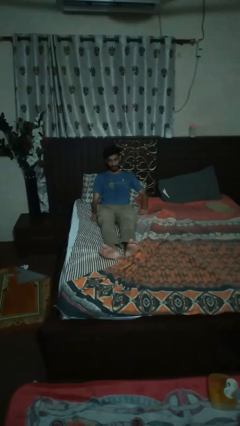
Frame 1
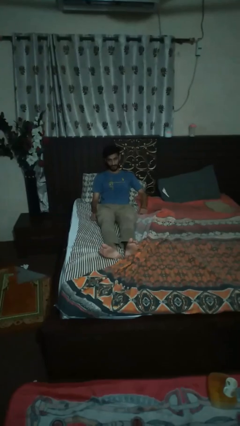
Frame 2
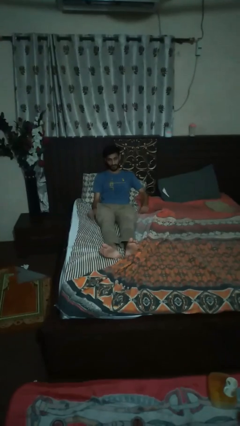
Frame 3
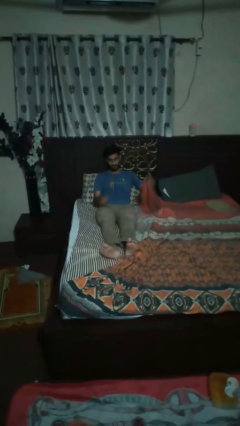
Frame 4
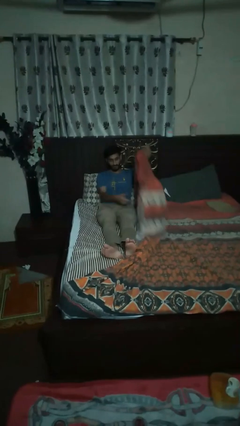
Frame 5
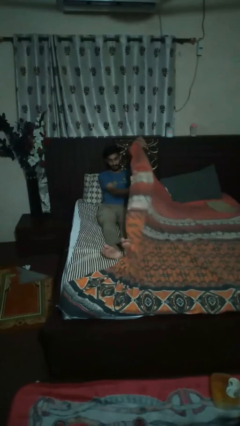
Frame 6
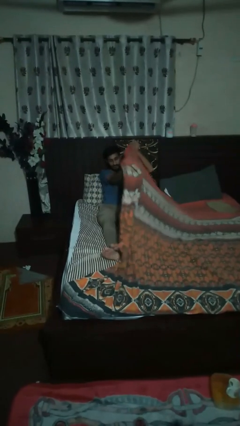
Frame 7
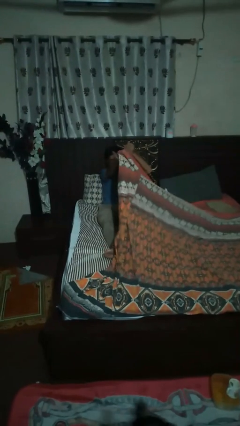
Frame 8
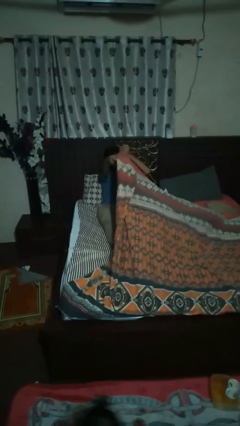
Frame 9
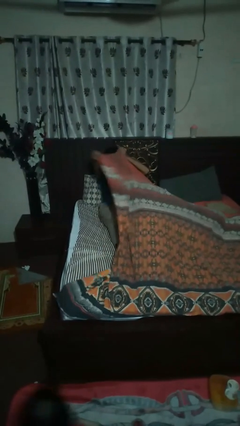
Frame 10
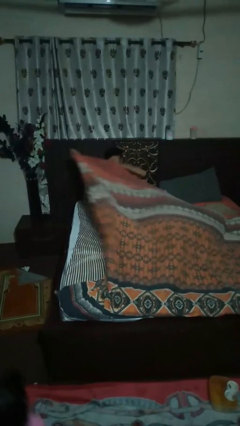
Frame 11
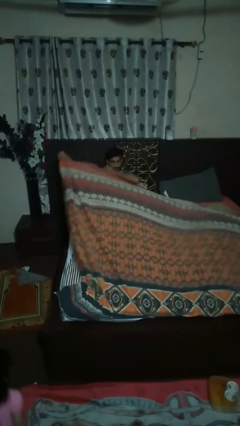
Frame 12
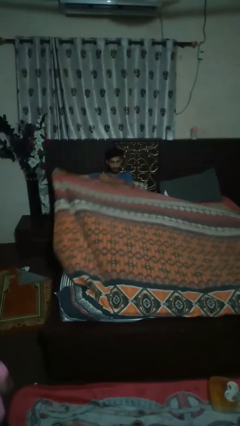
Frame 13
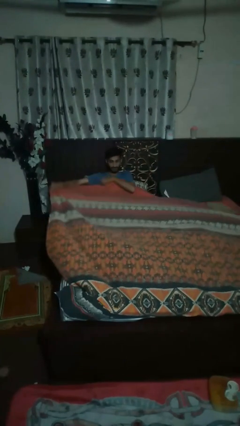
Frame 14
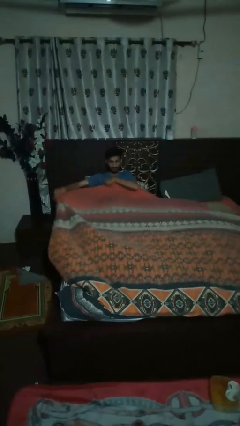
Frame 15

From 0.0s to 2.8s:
person covers with bedsheets

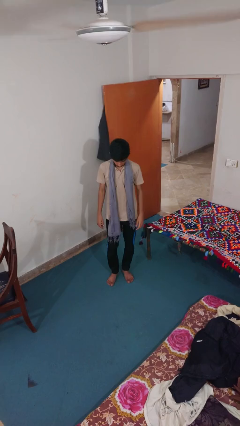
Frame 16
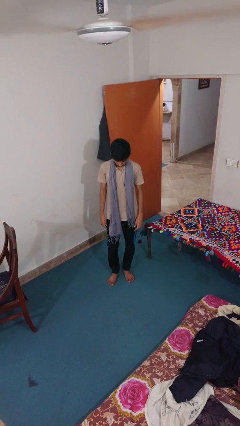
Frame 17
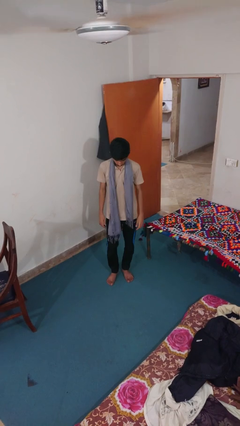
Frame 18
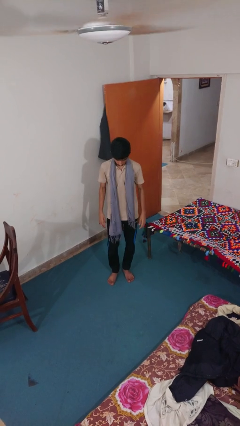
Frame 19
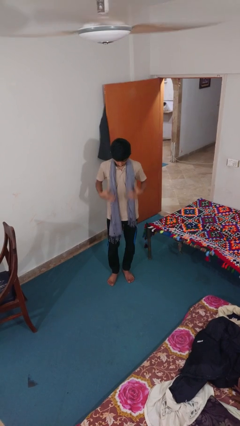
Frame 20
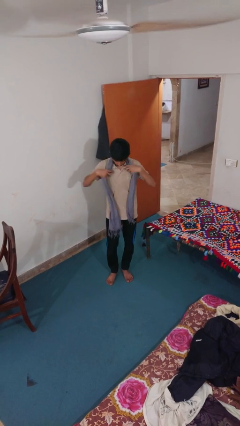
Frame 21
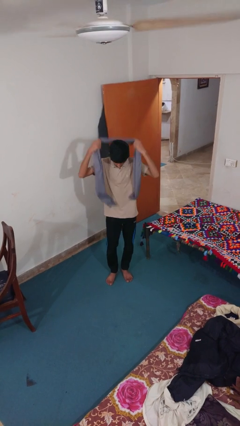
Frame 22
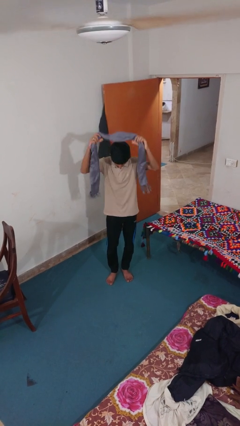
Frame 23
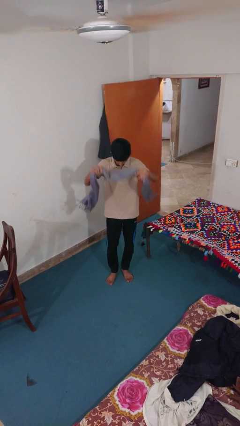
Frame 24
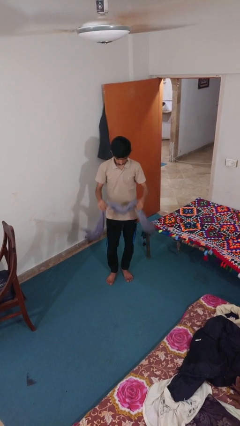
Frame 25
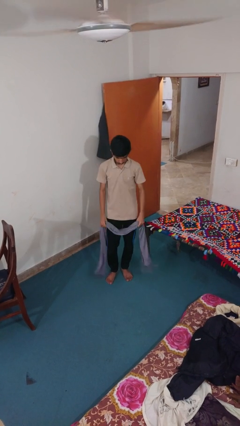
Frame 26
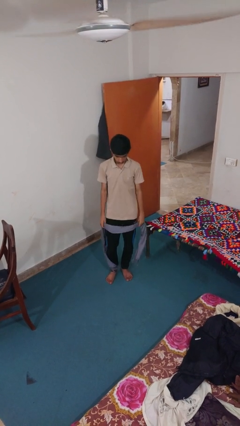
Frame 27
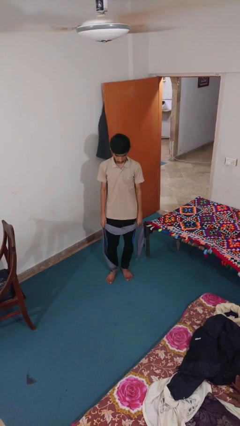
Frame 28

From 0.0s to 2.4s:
person takes off scarf

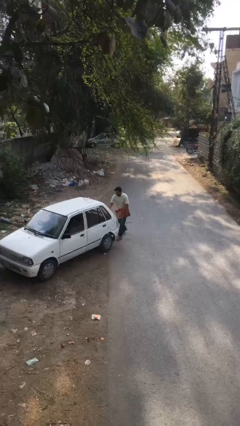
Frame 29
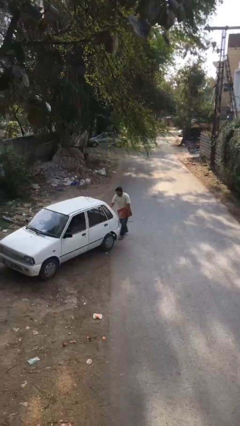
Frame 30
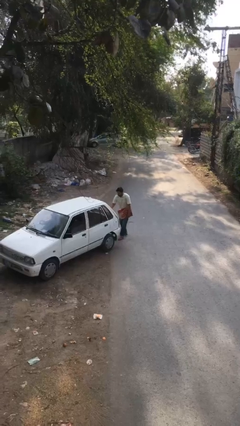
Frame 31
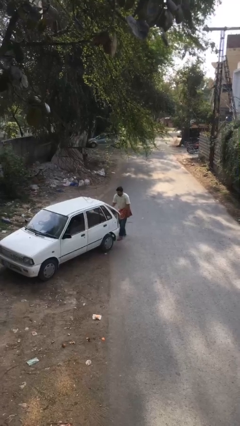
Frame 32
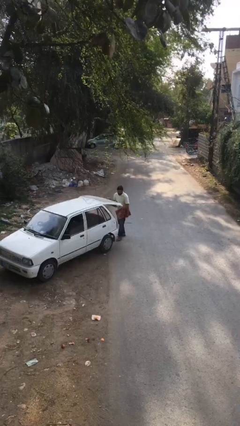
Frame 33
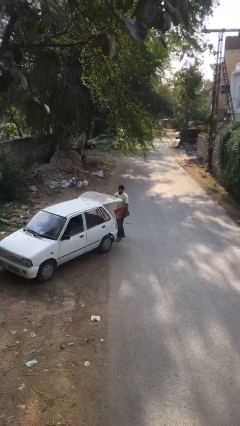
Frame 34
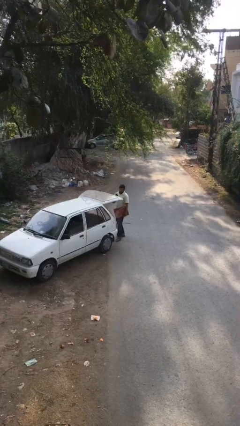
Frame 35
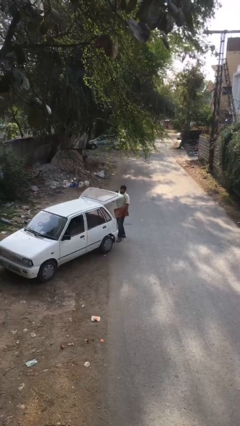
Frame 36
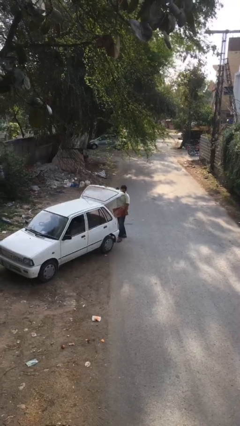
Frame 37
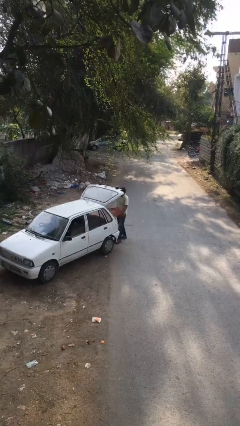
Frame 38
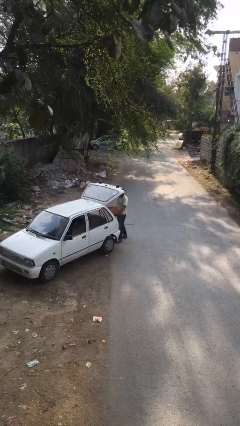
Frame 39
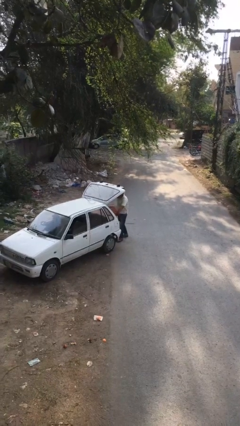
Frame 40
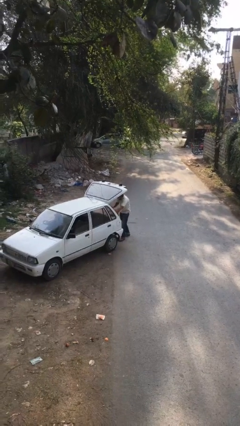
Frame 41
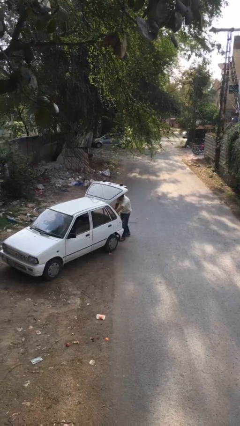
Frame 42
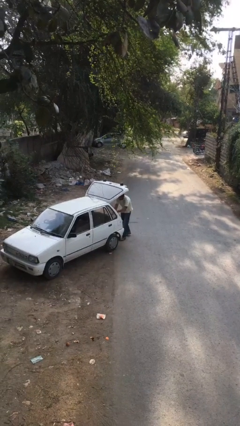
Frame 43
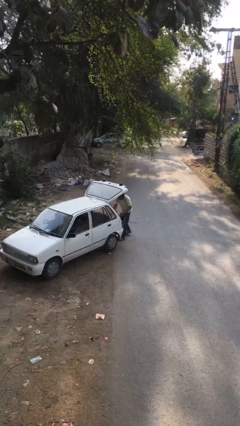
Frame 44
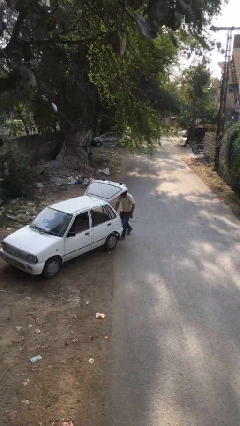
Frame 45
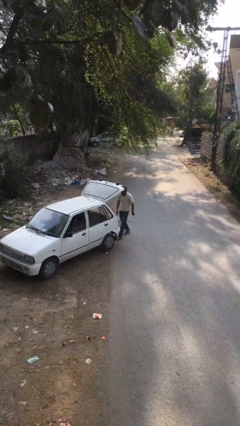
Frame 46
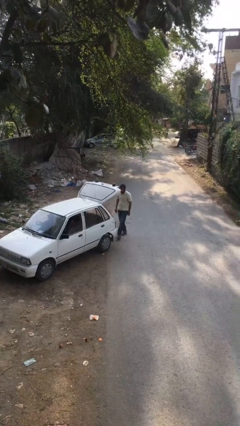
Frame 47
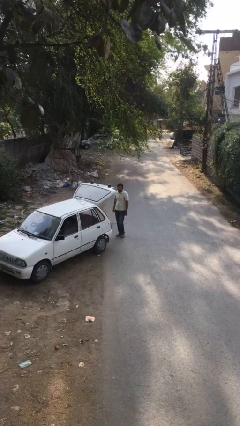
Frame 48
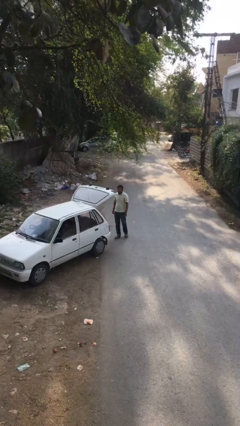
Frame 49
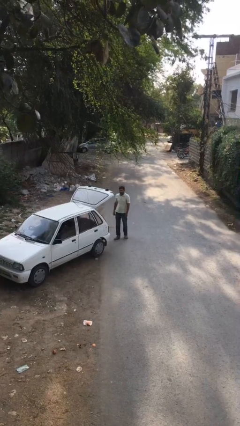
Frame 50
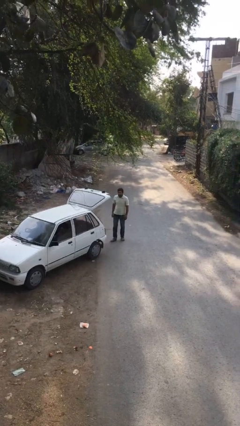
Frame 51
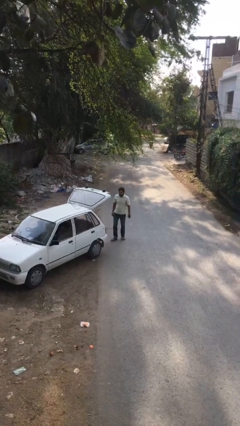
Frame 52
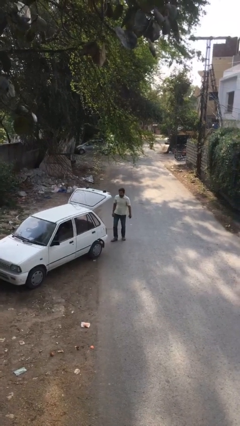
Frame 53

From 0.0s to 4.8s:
person loads car

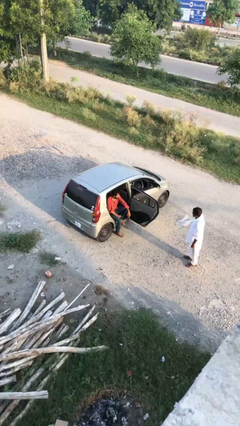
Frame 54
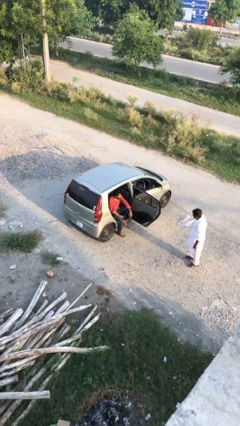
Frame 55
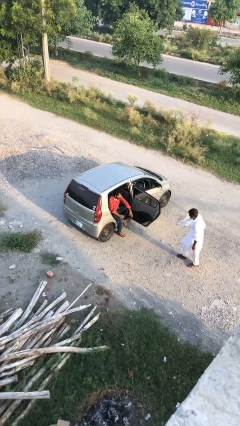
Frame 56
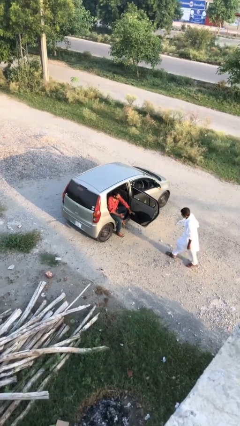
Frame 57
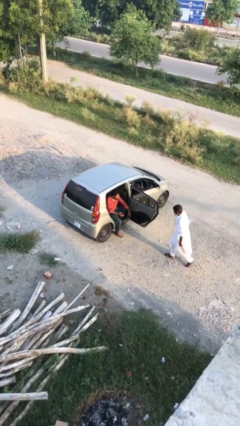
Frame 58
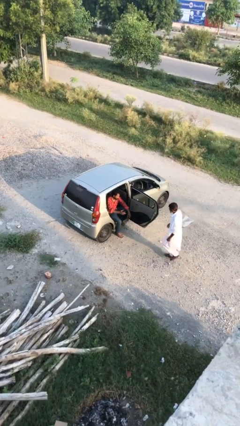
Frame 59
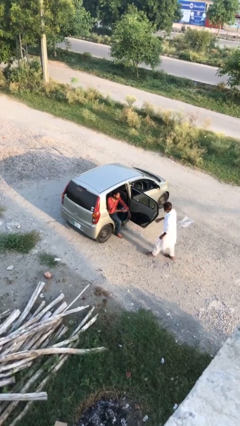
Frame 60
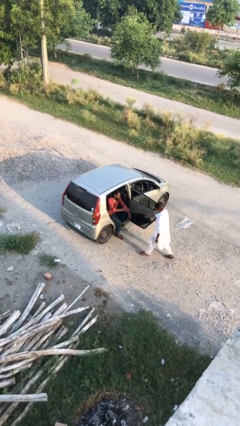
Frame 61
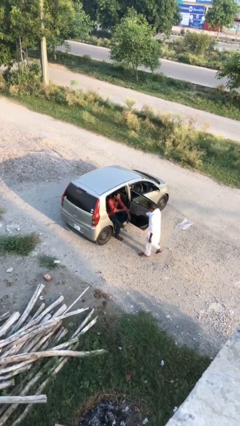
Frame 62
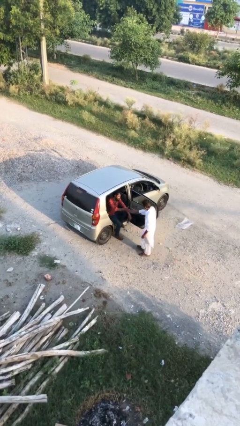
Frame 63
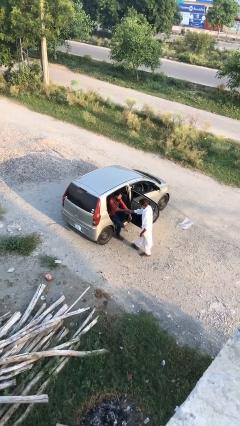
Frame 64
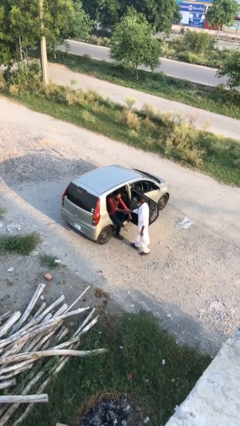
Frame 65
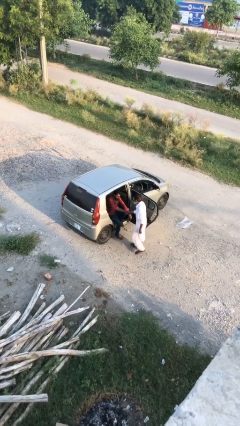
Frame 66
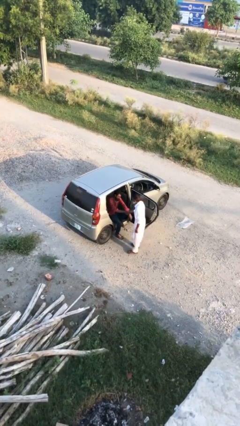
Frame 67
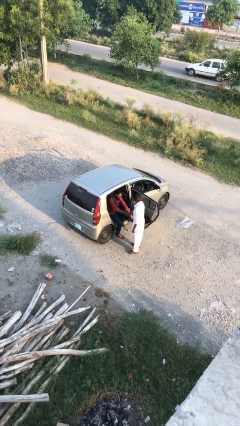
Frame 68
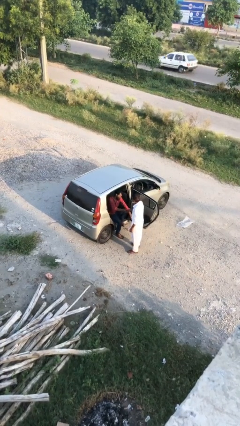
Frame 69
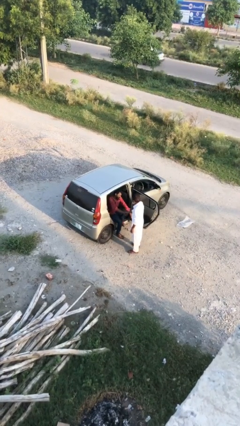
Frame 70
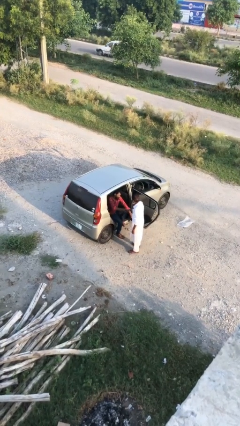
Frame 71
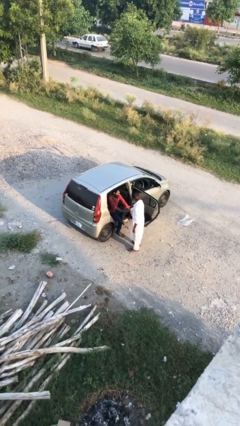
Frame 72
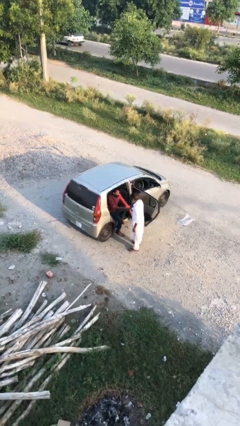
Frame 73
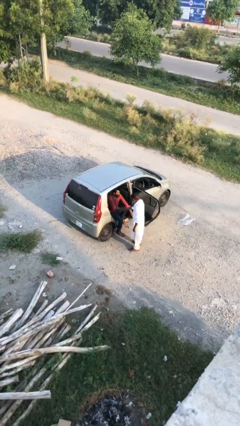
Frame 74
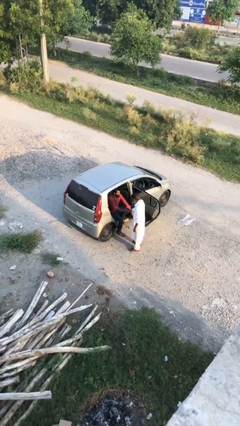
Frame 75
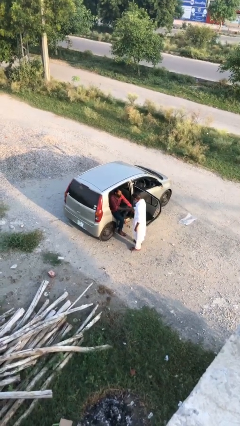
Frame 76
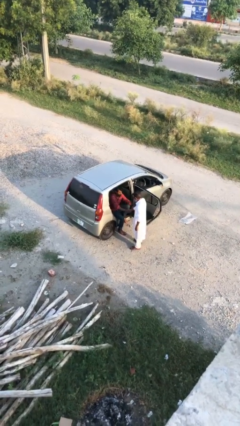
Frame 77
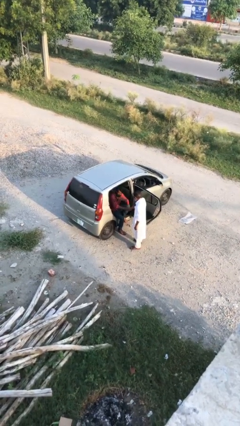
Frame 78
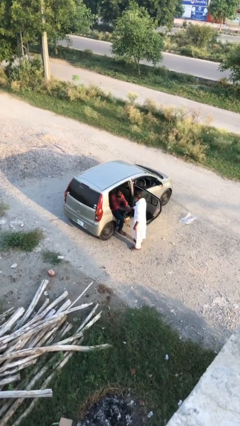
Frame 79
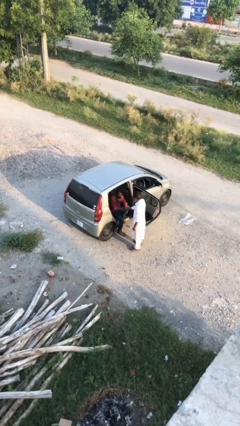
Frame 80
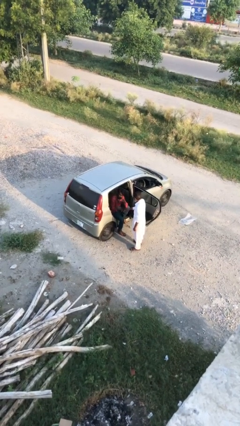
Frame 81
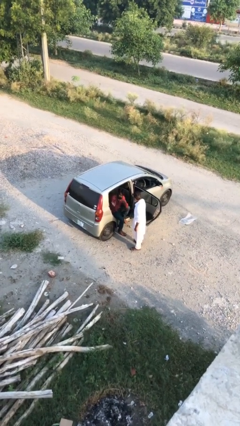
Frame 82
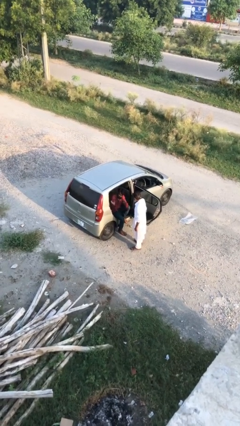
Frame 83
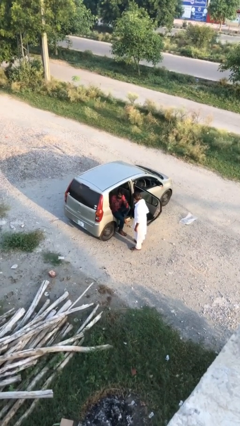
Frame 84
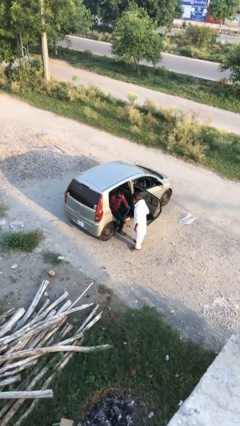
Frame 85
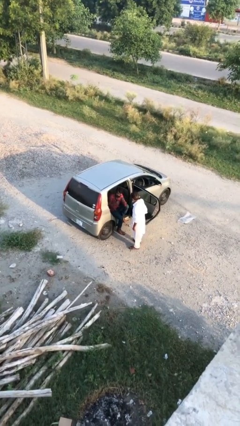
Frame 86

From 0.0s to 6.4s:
person shakes hand

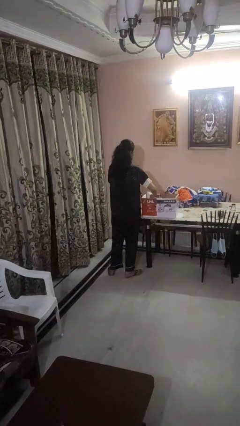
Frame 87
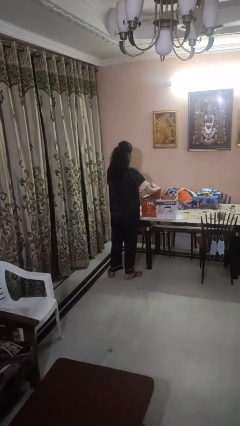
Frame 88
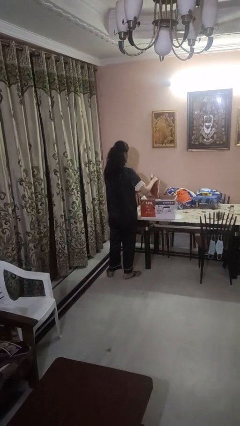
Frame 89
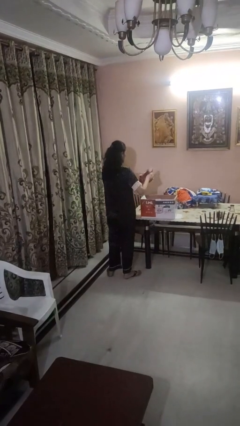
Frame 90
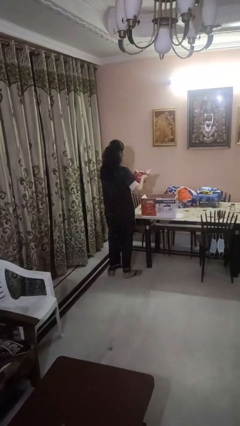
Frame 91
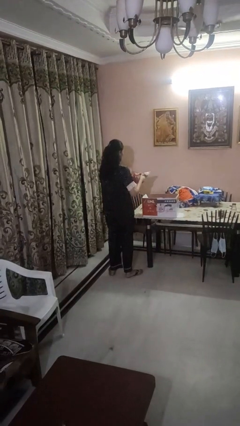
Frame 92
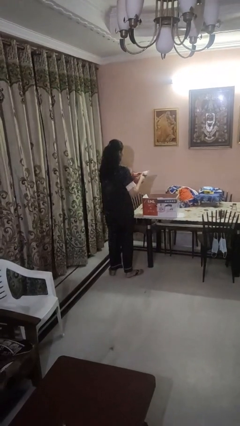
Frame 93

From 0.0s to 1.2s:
person takes object from box
